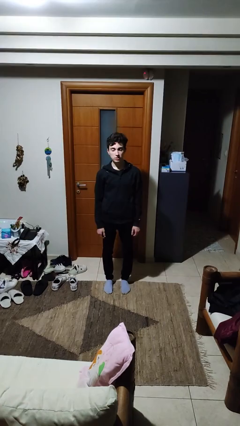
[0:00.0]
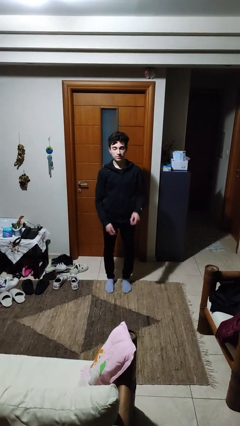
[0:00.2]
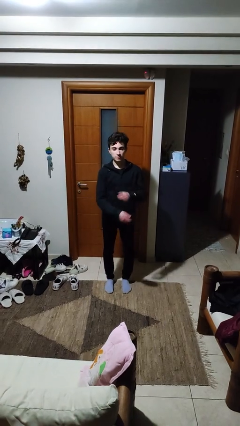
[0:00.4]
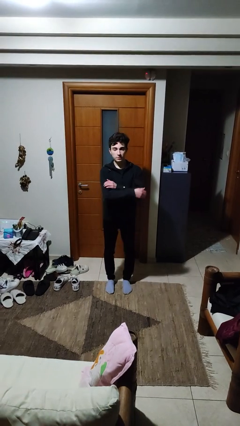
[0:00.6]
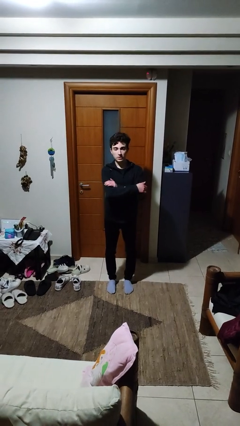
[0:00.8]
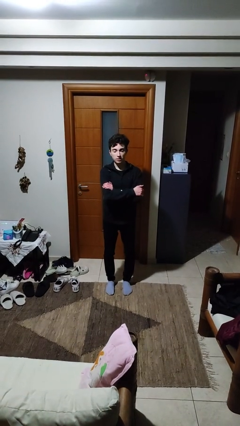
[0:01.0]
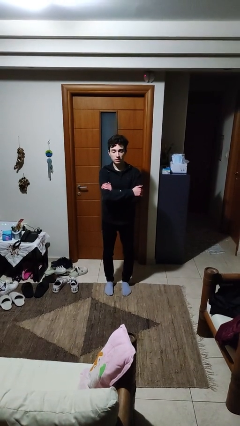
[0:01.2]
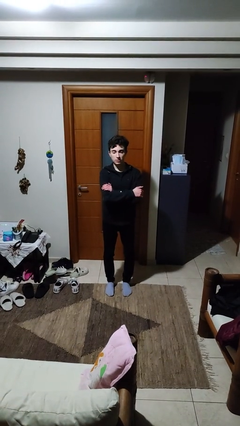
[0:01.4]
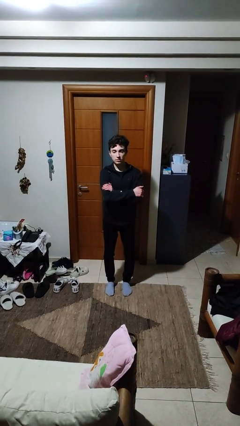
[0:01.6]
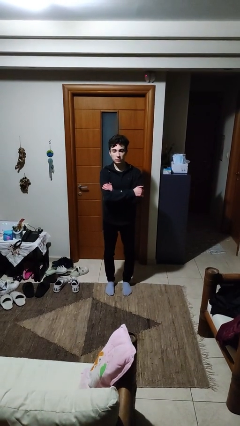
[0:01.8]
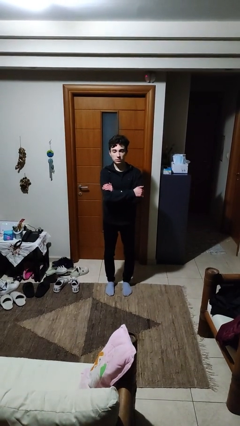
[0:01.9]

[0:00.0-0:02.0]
person crosses arms

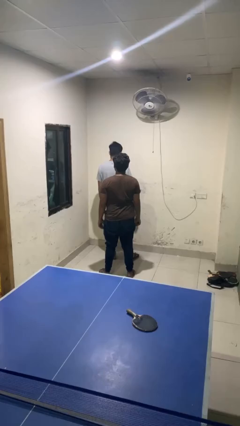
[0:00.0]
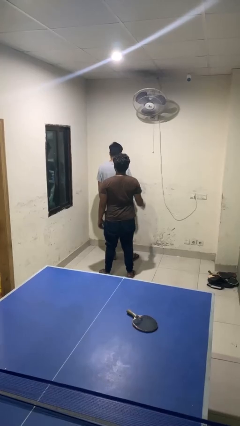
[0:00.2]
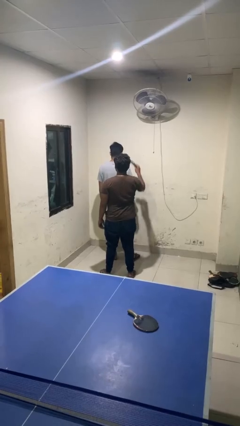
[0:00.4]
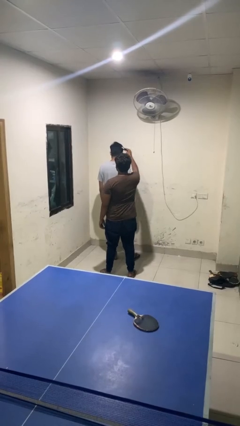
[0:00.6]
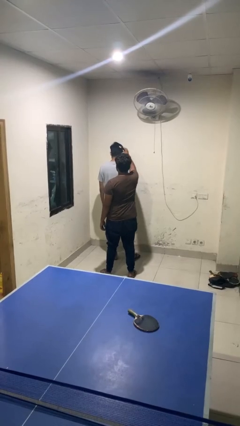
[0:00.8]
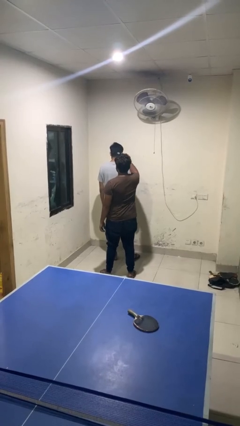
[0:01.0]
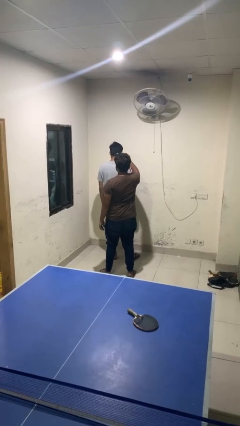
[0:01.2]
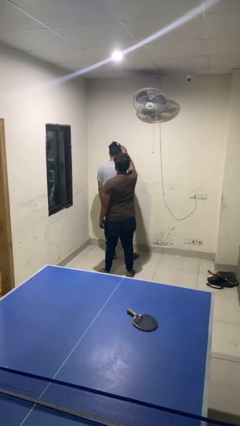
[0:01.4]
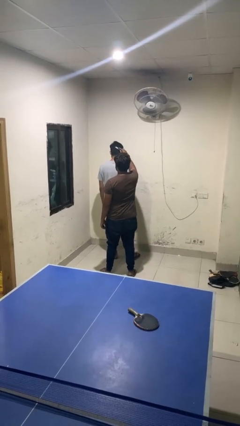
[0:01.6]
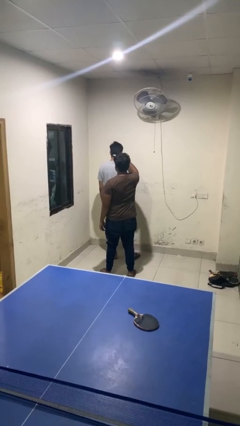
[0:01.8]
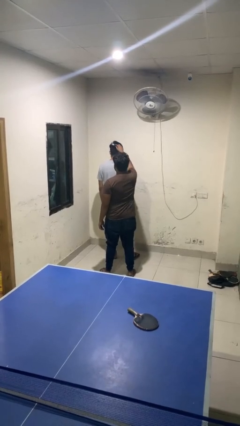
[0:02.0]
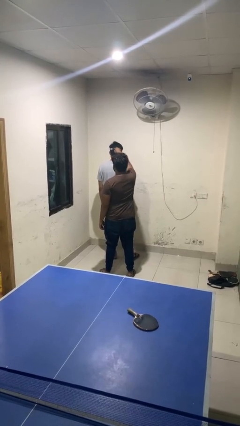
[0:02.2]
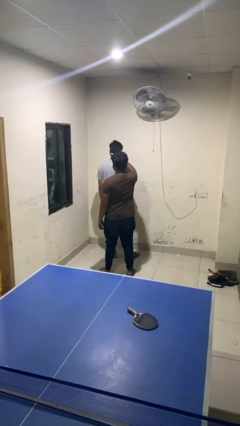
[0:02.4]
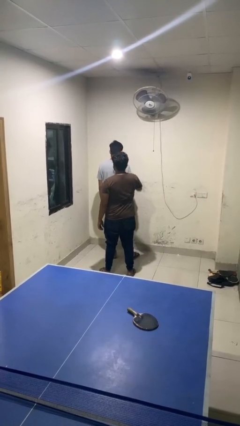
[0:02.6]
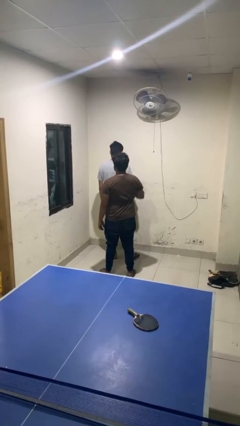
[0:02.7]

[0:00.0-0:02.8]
person brushes hair of person

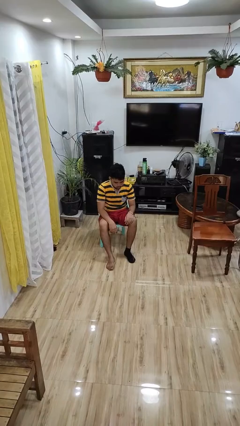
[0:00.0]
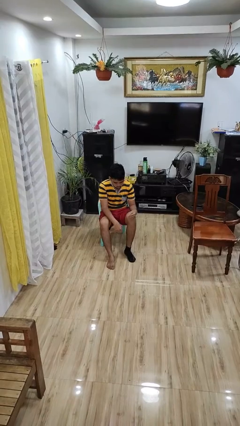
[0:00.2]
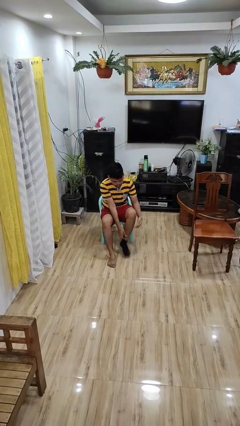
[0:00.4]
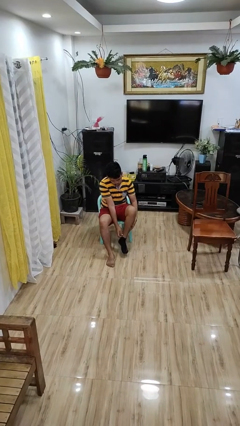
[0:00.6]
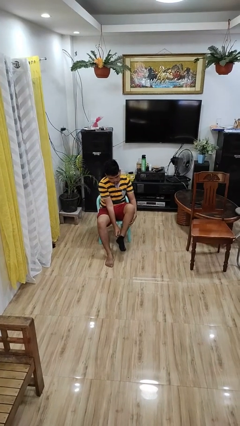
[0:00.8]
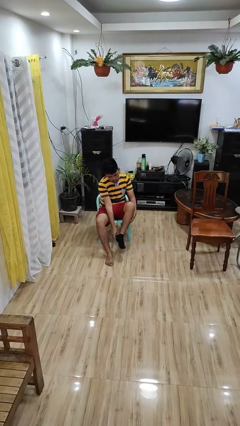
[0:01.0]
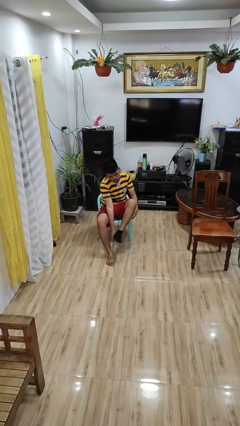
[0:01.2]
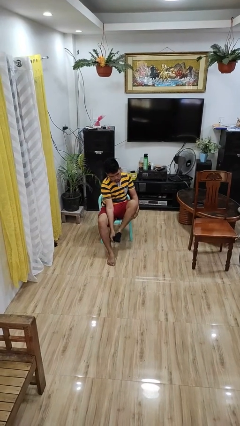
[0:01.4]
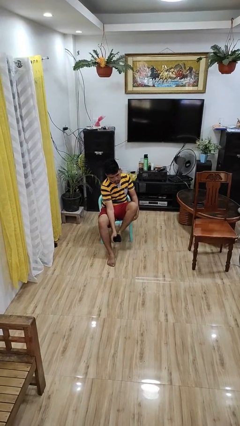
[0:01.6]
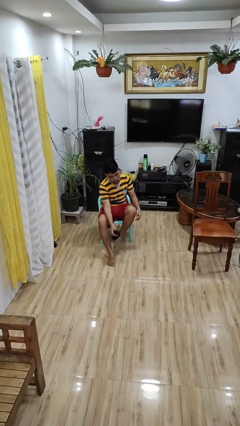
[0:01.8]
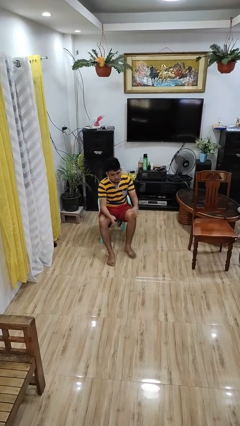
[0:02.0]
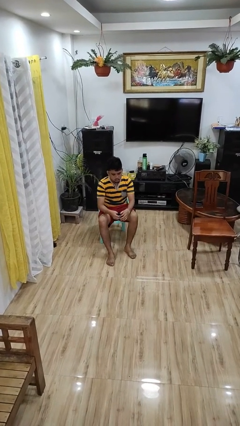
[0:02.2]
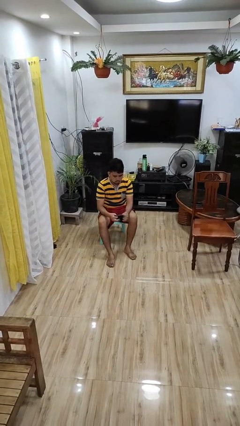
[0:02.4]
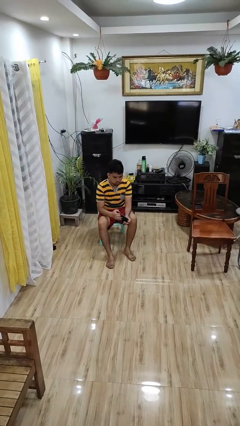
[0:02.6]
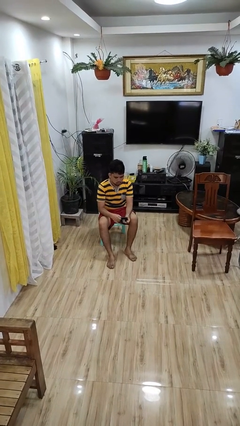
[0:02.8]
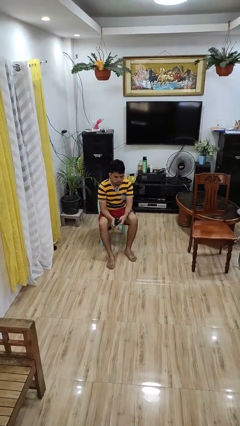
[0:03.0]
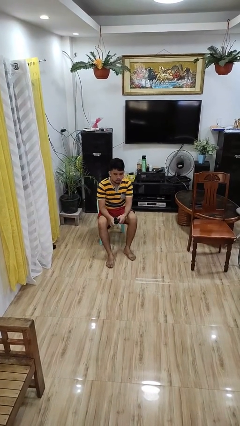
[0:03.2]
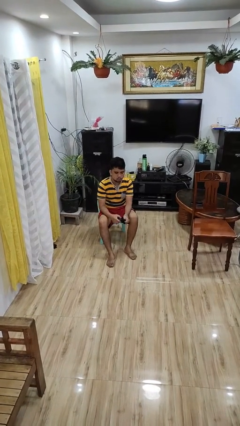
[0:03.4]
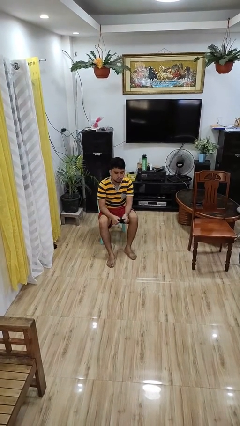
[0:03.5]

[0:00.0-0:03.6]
person takes off socks

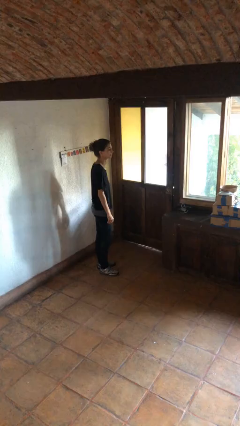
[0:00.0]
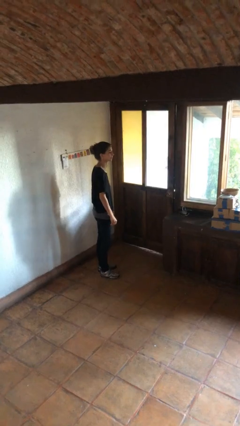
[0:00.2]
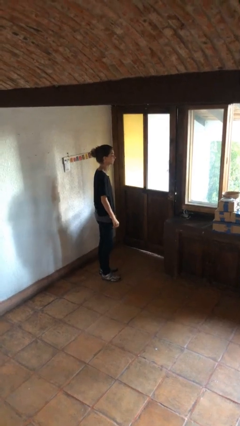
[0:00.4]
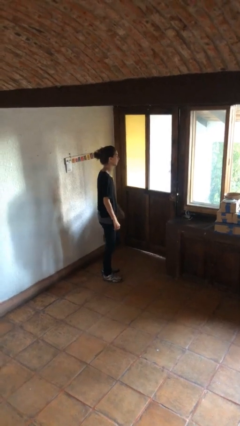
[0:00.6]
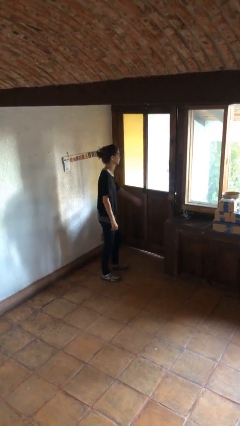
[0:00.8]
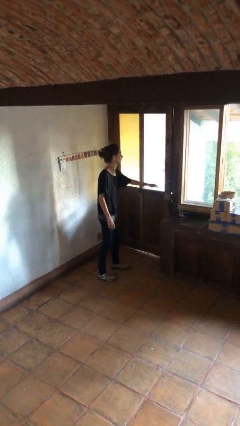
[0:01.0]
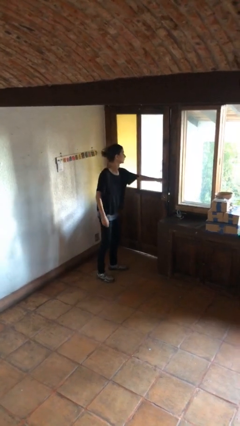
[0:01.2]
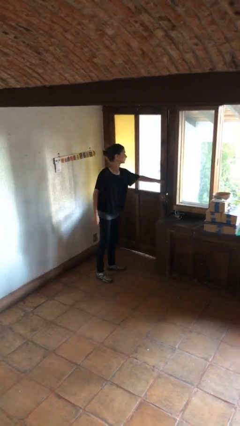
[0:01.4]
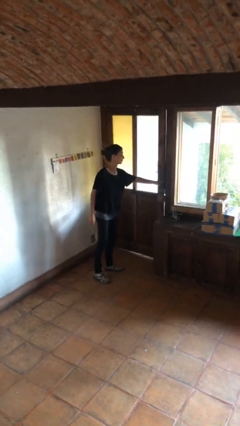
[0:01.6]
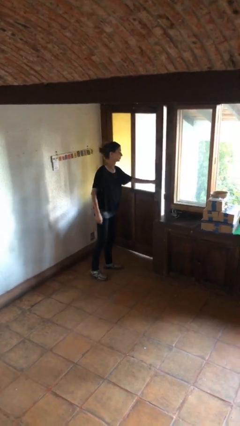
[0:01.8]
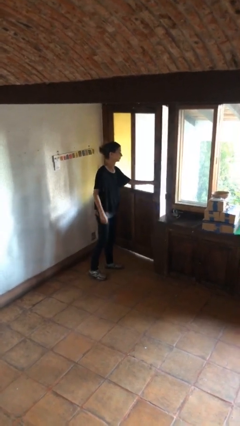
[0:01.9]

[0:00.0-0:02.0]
person opens facility door

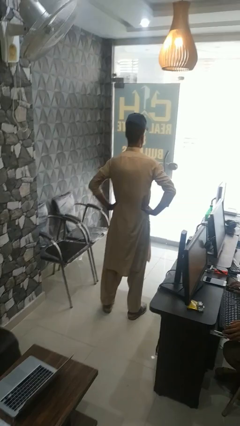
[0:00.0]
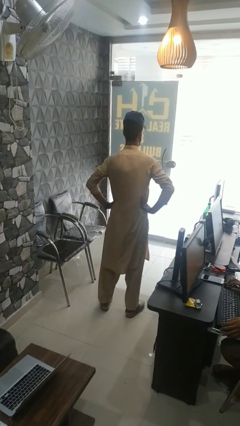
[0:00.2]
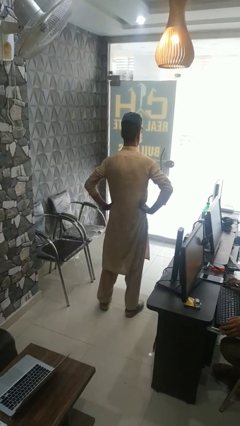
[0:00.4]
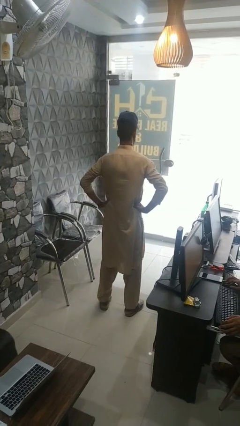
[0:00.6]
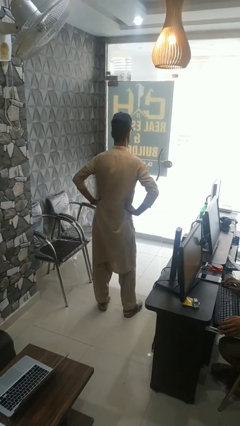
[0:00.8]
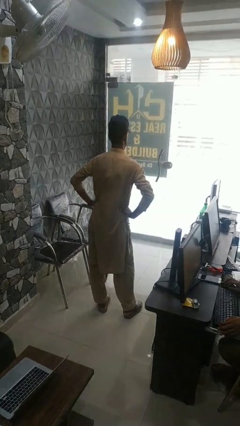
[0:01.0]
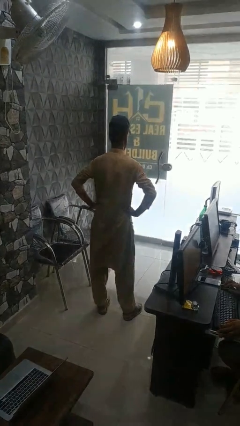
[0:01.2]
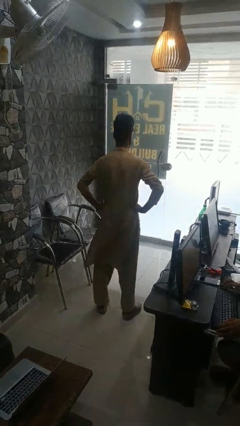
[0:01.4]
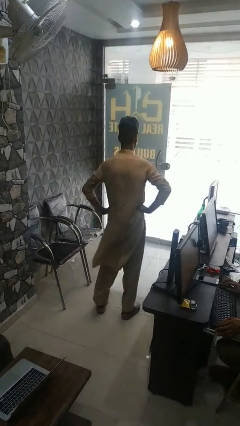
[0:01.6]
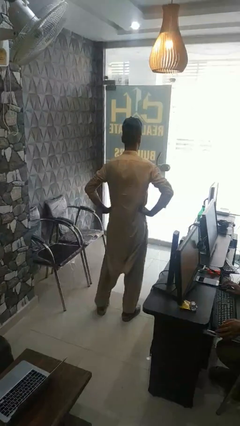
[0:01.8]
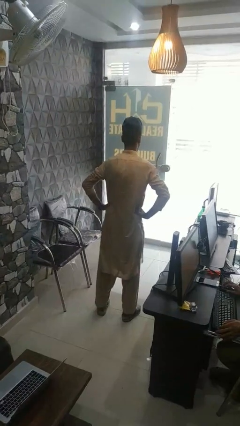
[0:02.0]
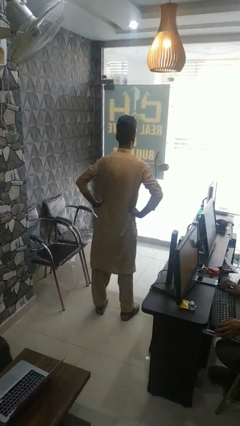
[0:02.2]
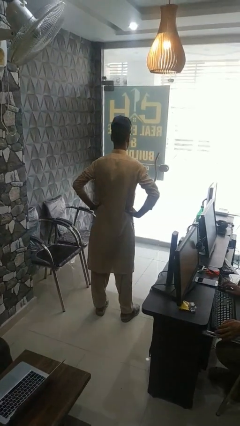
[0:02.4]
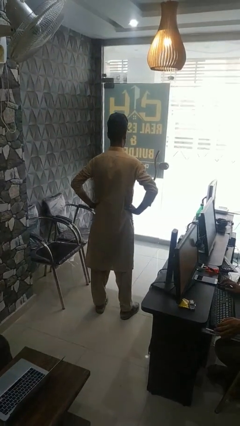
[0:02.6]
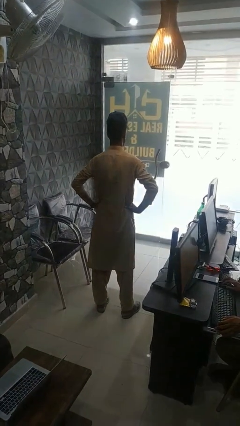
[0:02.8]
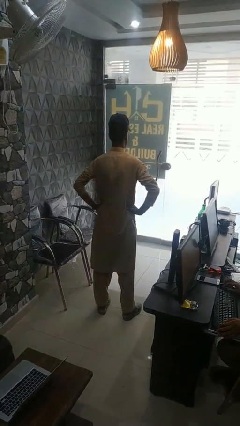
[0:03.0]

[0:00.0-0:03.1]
person wiggles hips

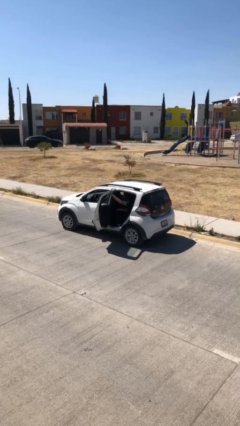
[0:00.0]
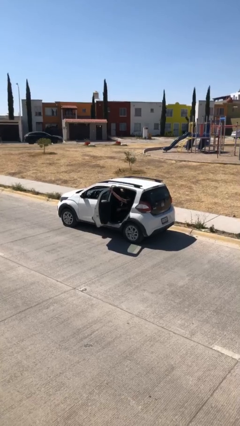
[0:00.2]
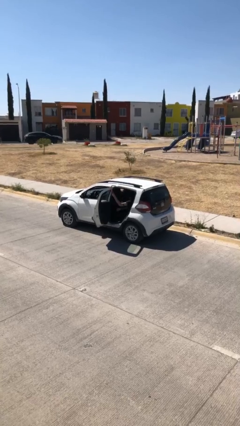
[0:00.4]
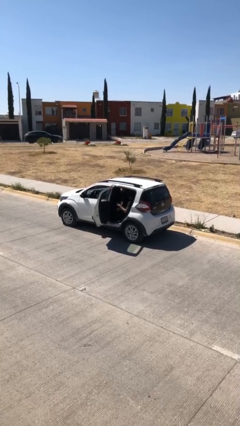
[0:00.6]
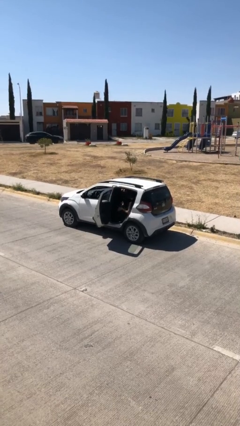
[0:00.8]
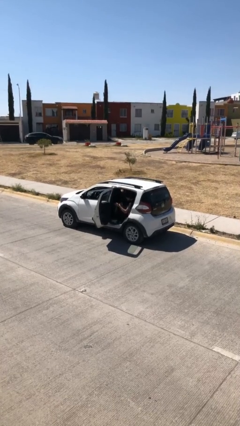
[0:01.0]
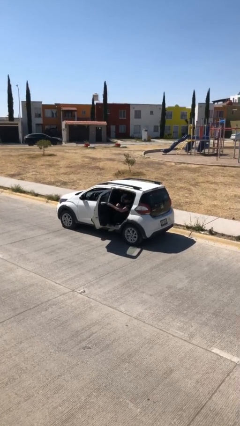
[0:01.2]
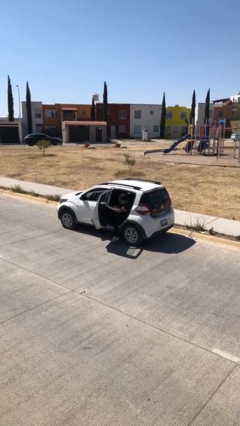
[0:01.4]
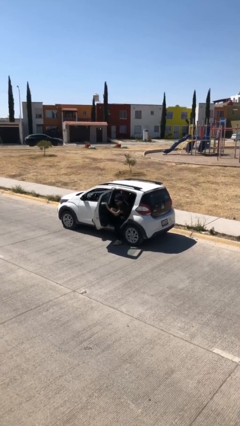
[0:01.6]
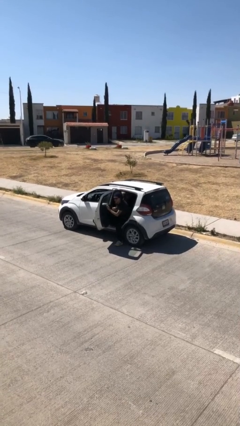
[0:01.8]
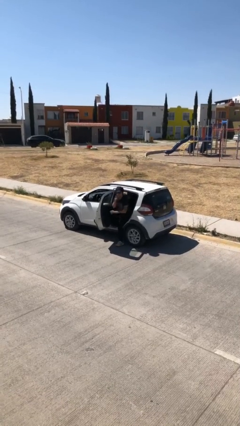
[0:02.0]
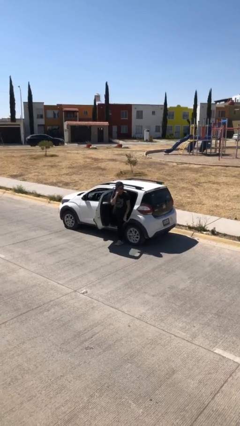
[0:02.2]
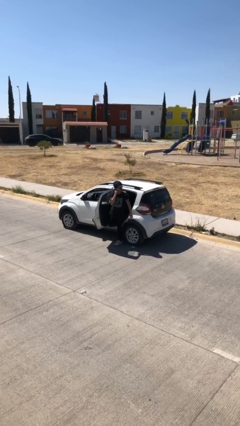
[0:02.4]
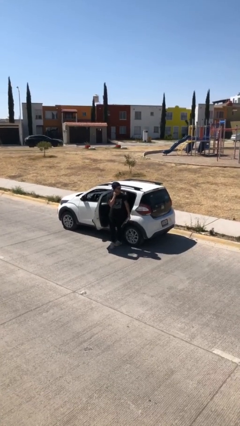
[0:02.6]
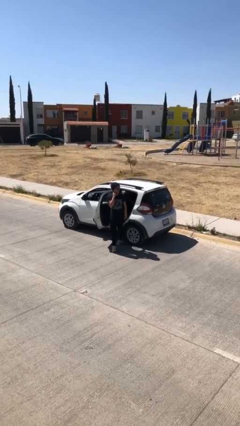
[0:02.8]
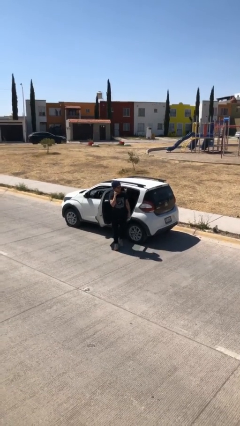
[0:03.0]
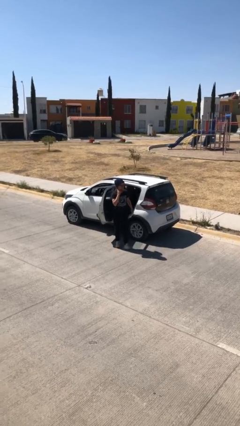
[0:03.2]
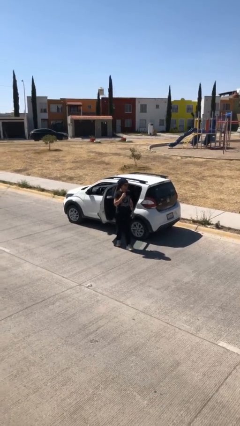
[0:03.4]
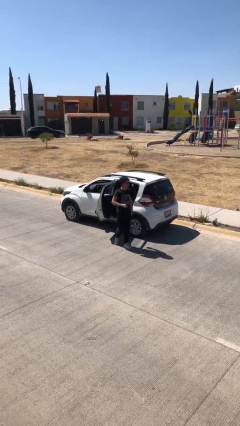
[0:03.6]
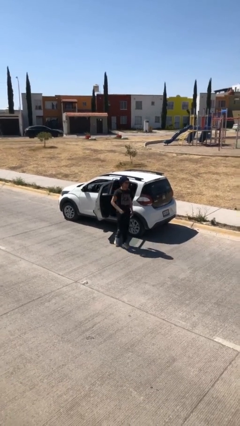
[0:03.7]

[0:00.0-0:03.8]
person exits car
